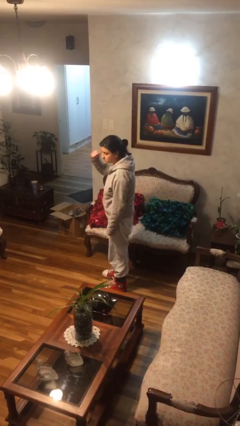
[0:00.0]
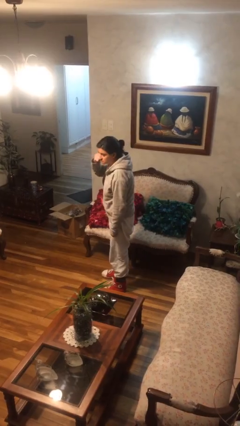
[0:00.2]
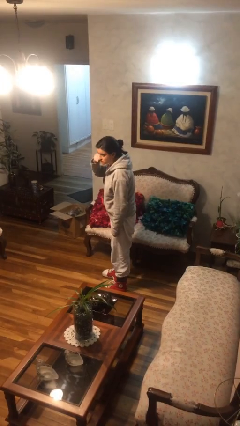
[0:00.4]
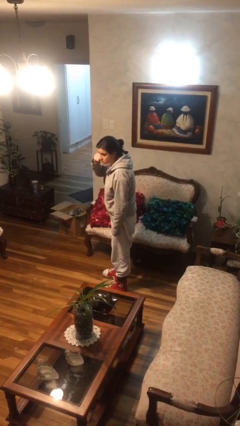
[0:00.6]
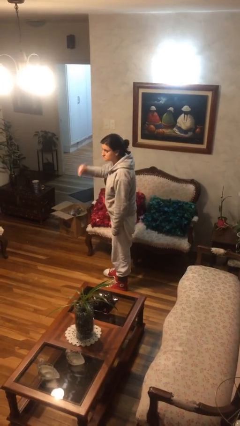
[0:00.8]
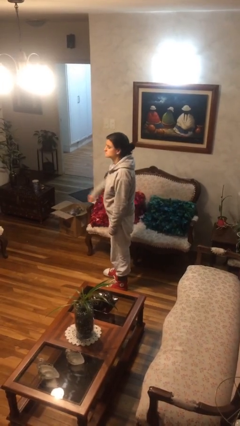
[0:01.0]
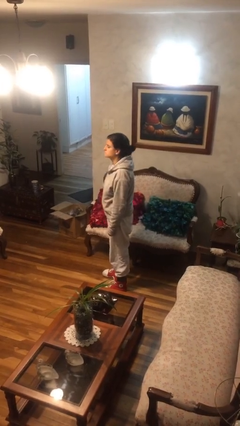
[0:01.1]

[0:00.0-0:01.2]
person gestures call me

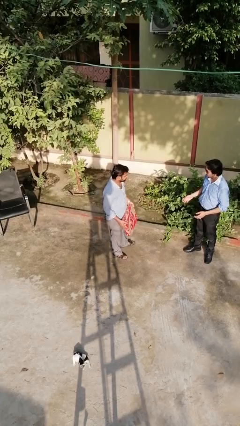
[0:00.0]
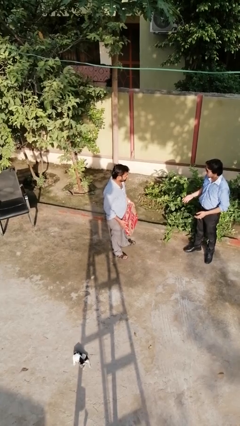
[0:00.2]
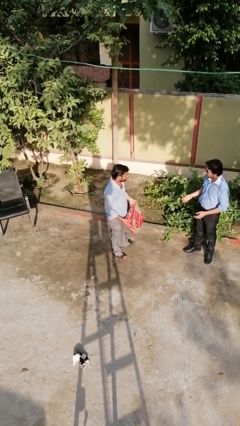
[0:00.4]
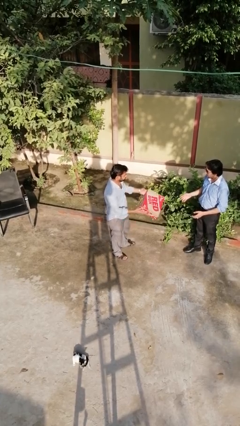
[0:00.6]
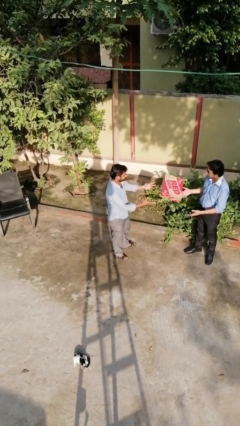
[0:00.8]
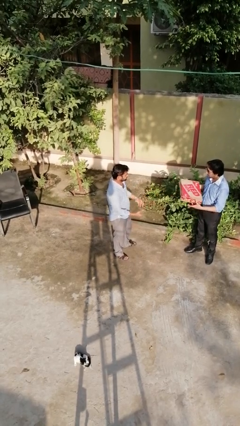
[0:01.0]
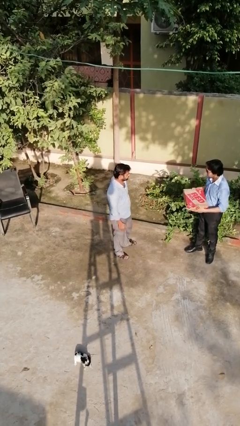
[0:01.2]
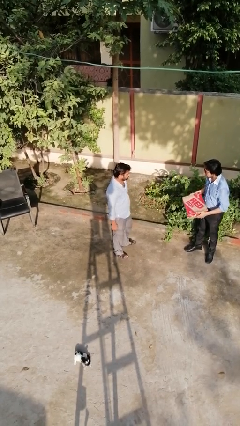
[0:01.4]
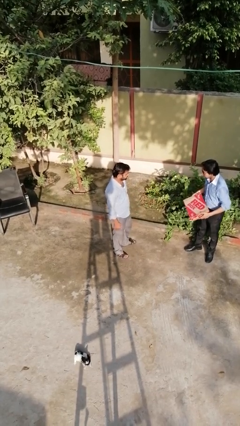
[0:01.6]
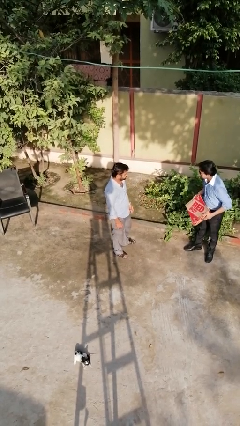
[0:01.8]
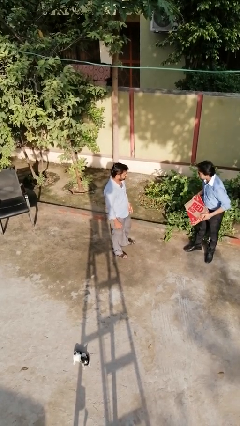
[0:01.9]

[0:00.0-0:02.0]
person throws object to person

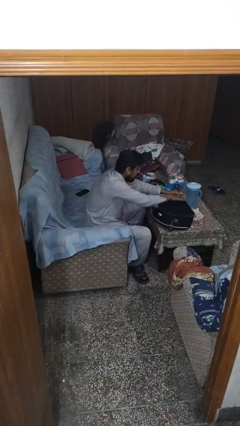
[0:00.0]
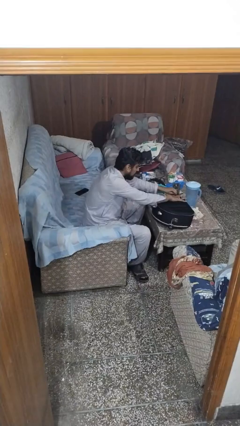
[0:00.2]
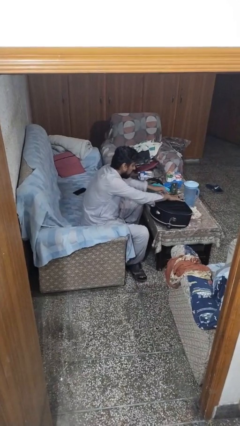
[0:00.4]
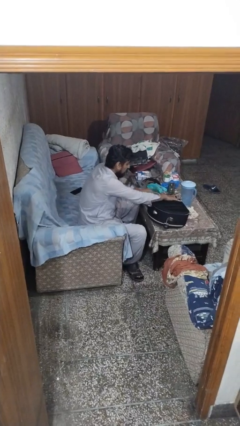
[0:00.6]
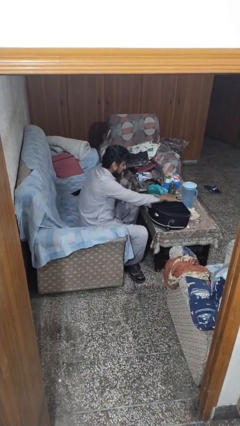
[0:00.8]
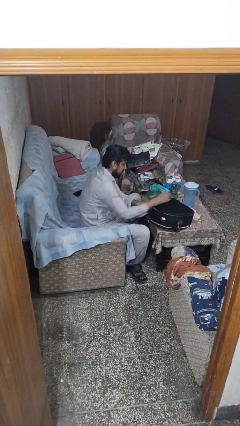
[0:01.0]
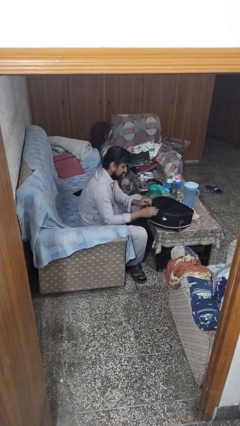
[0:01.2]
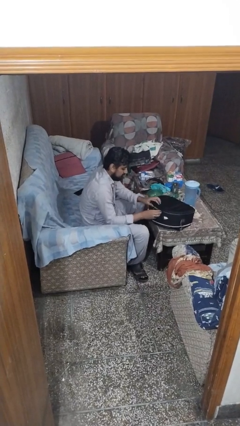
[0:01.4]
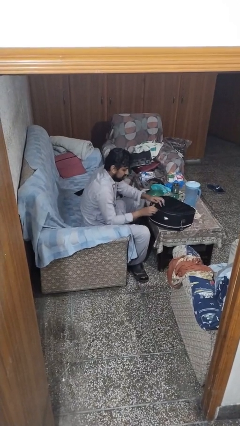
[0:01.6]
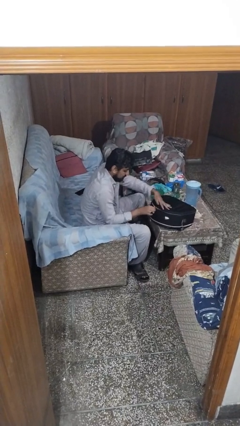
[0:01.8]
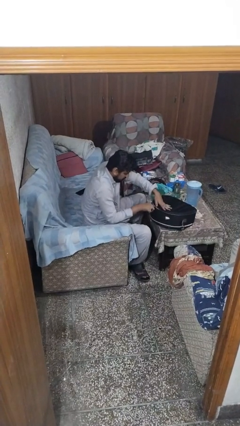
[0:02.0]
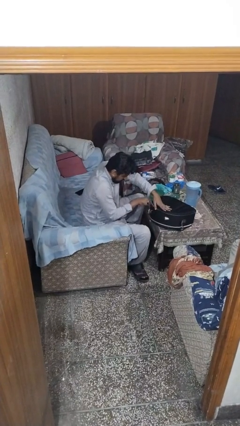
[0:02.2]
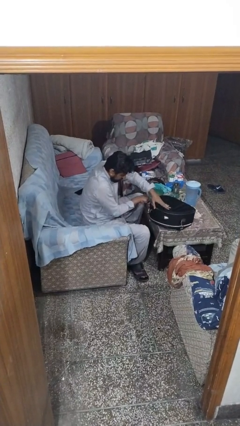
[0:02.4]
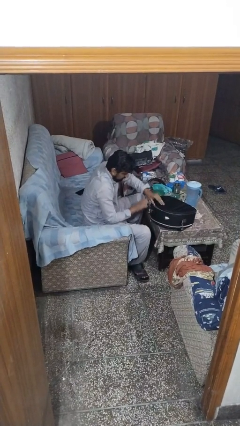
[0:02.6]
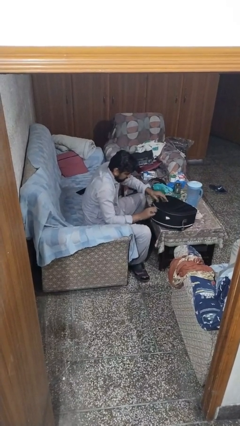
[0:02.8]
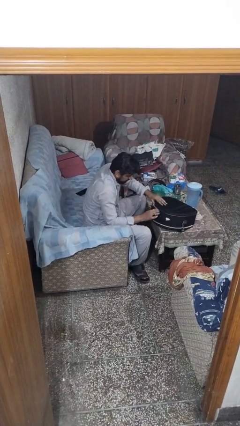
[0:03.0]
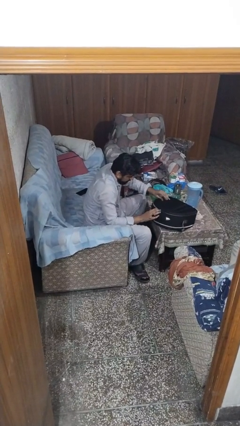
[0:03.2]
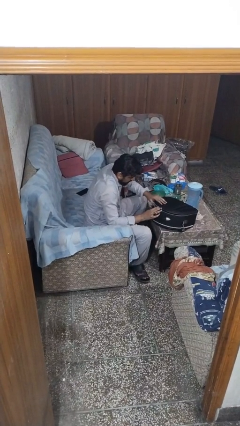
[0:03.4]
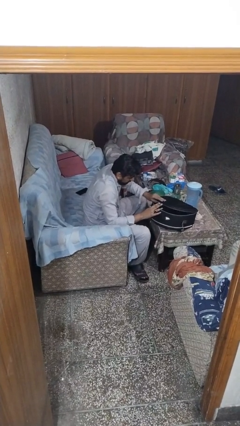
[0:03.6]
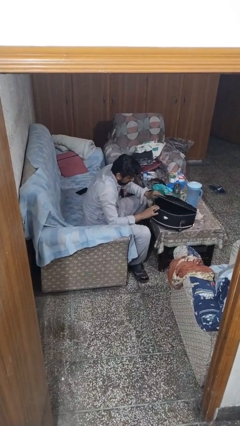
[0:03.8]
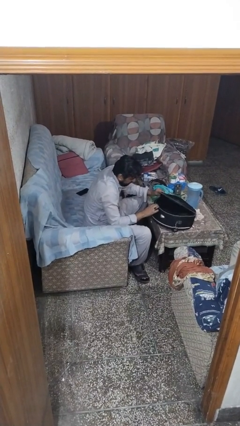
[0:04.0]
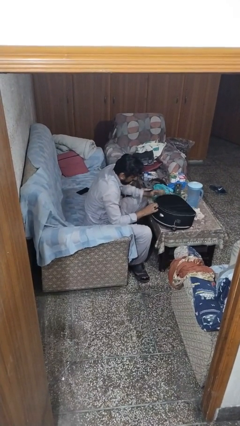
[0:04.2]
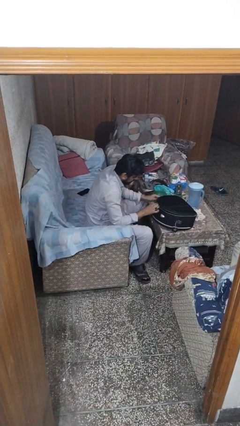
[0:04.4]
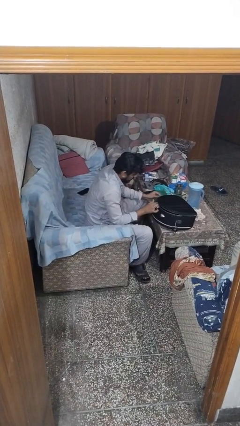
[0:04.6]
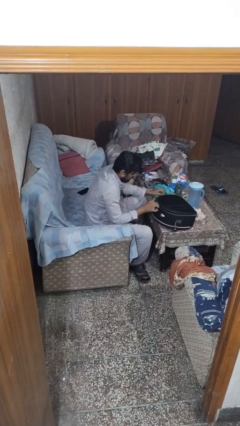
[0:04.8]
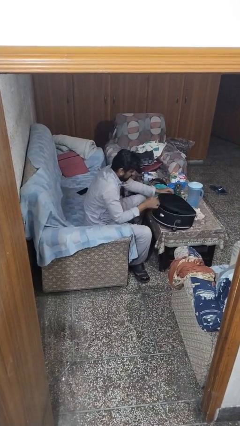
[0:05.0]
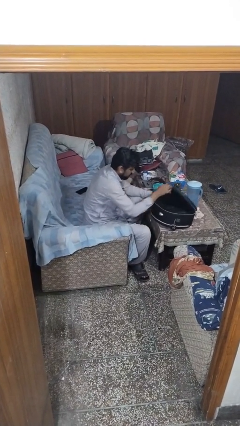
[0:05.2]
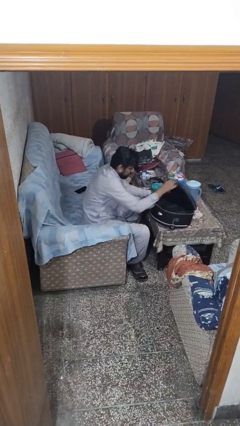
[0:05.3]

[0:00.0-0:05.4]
person opens suitcase

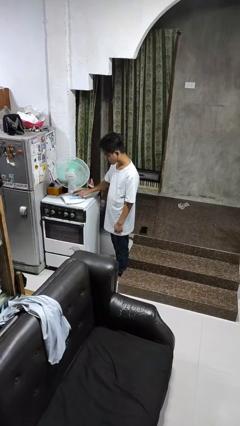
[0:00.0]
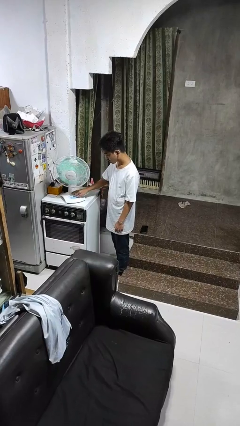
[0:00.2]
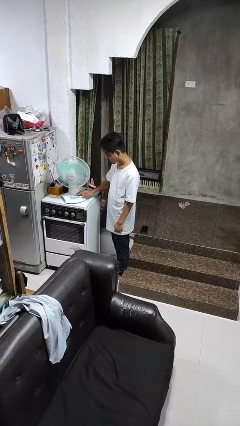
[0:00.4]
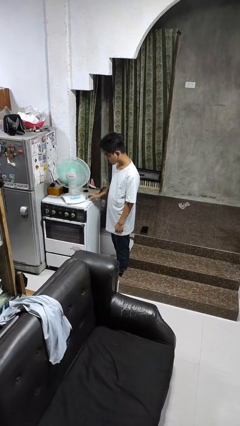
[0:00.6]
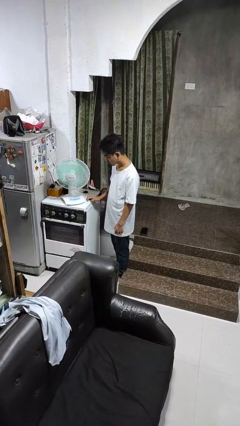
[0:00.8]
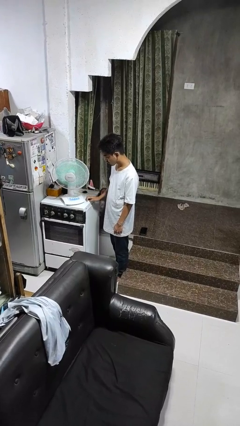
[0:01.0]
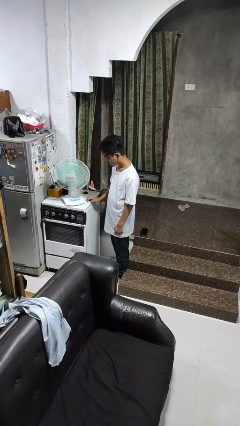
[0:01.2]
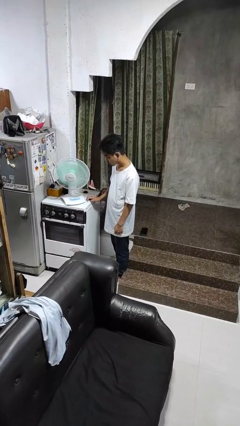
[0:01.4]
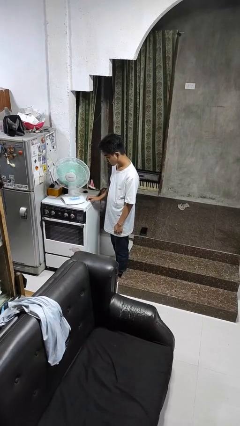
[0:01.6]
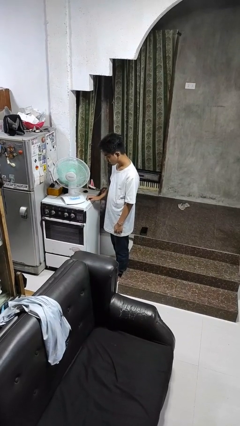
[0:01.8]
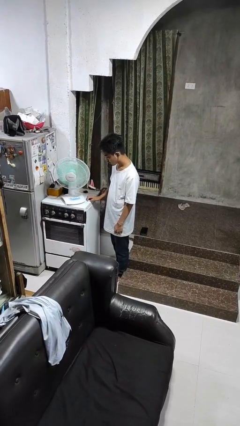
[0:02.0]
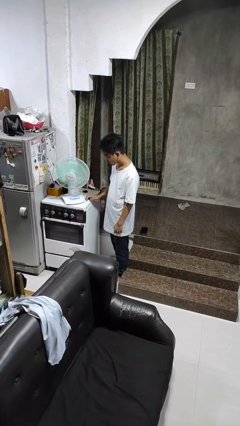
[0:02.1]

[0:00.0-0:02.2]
person turns on fan

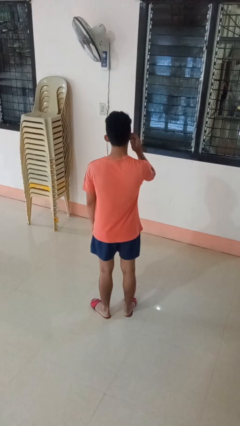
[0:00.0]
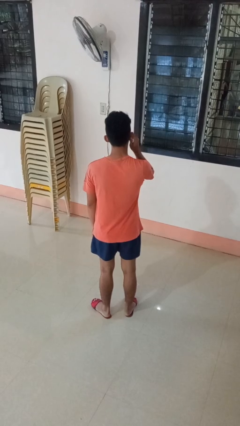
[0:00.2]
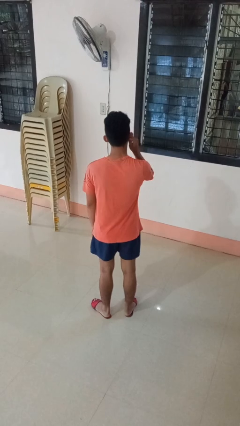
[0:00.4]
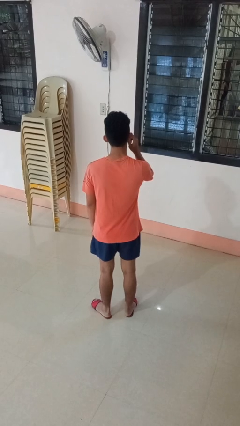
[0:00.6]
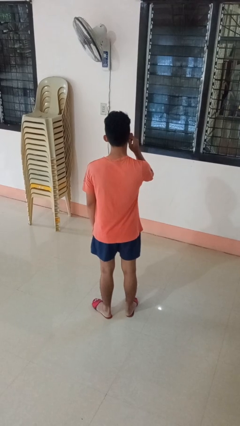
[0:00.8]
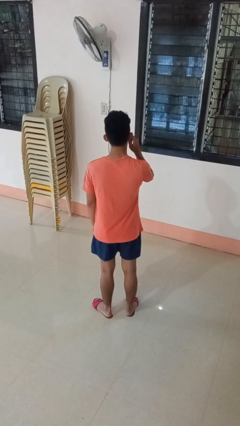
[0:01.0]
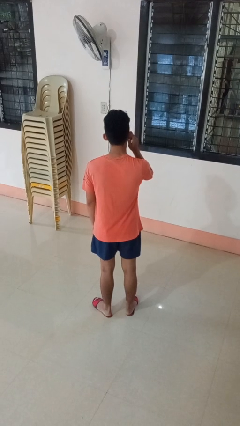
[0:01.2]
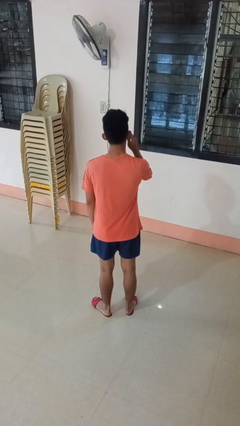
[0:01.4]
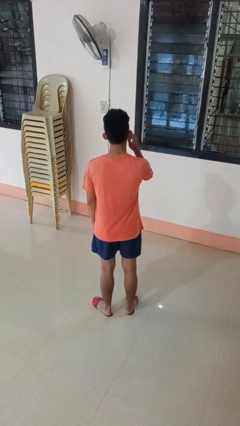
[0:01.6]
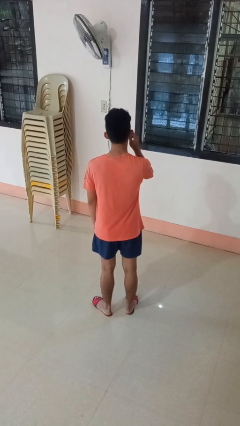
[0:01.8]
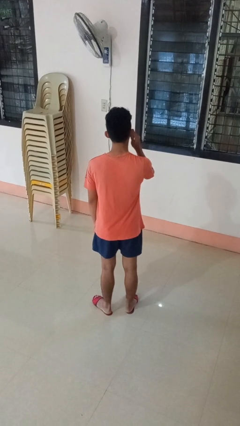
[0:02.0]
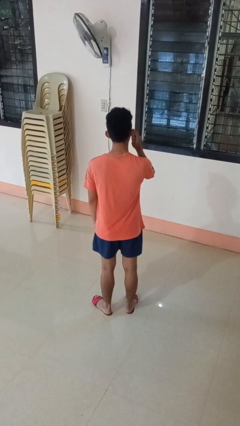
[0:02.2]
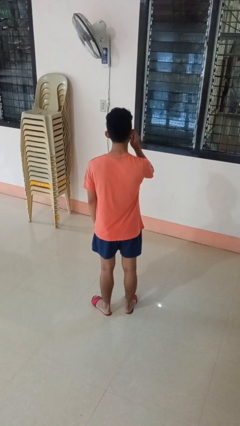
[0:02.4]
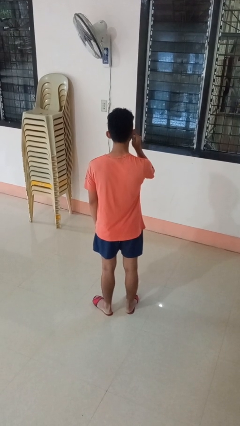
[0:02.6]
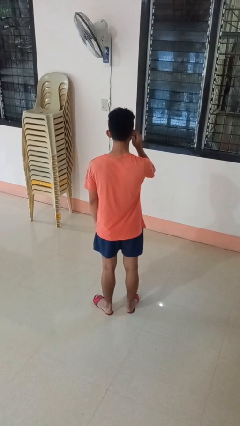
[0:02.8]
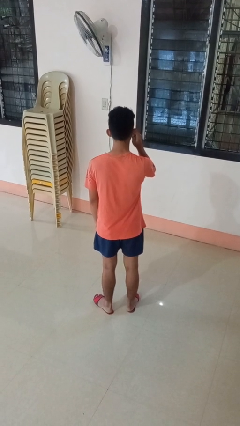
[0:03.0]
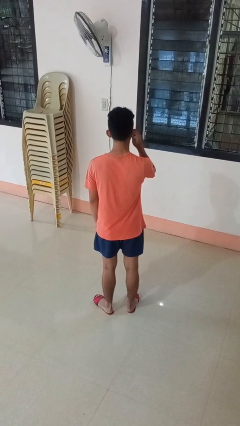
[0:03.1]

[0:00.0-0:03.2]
person touches earlobe

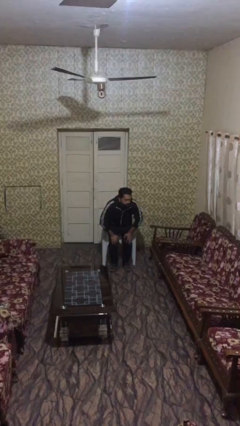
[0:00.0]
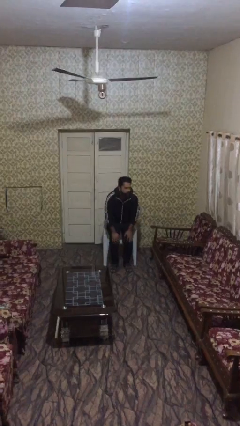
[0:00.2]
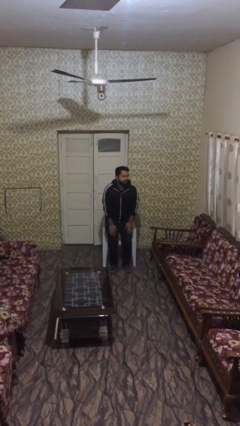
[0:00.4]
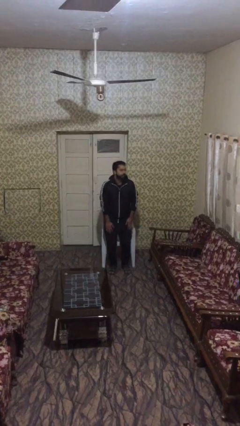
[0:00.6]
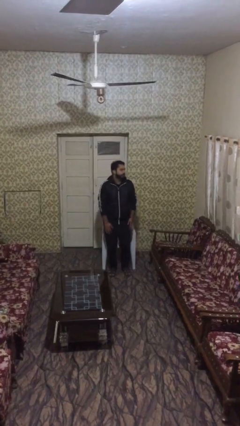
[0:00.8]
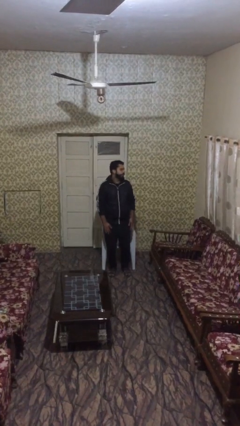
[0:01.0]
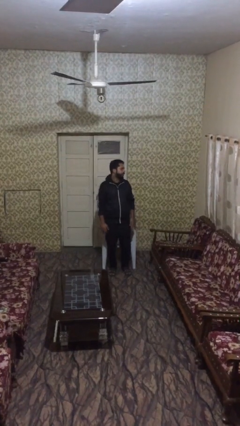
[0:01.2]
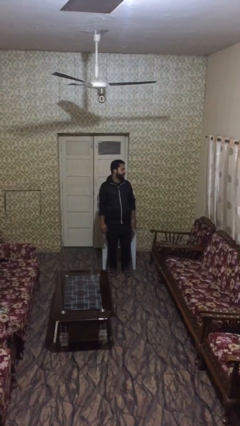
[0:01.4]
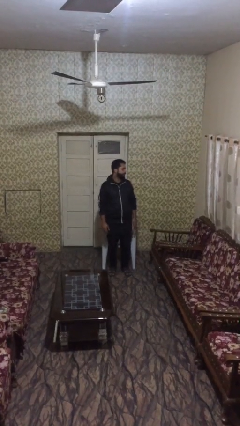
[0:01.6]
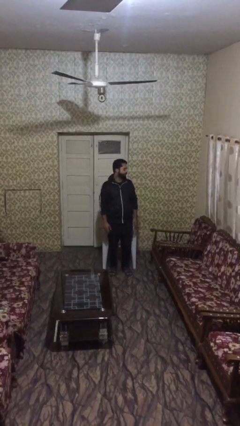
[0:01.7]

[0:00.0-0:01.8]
person stands up

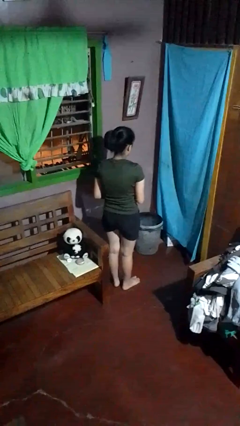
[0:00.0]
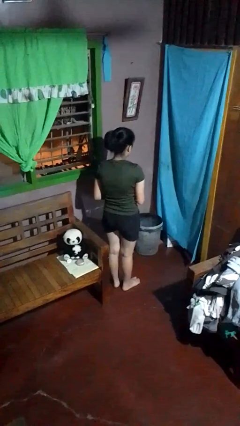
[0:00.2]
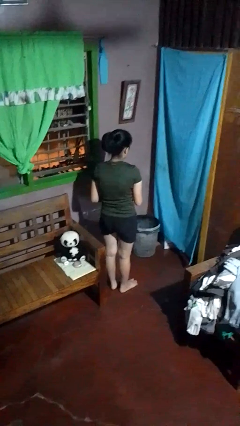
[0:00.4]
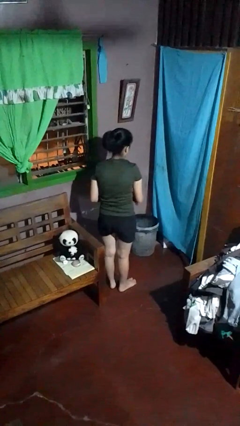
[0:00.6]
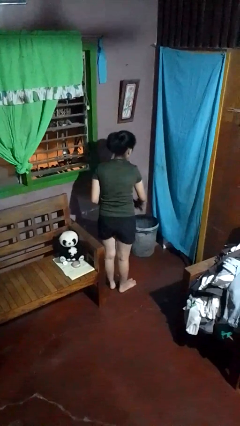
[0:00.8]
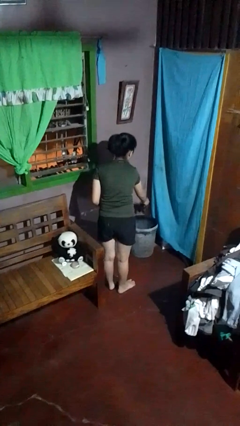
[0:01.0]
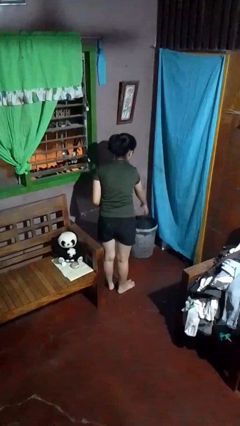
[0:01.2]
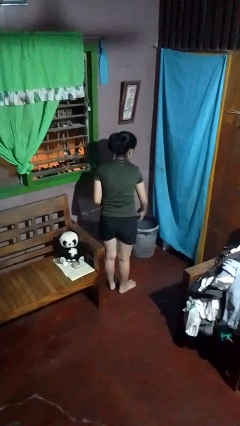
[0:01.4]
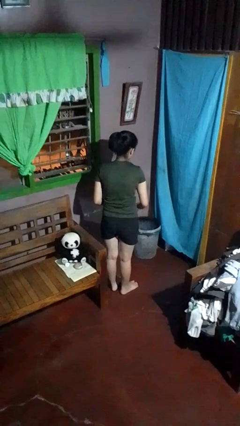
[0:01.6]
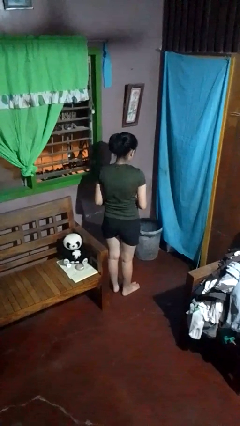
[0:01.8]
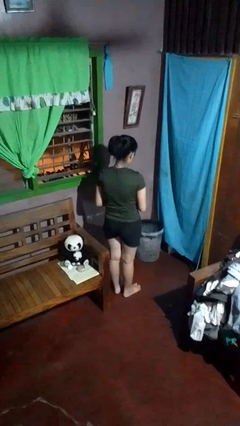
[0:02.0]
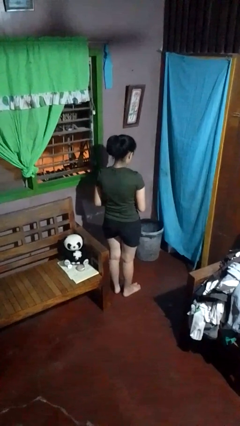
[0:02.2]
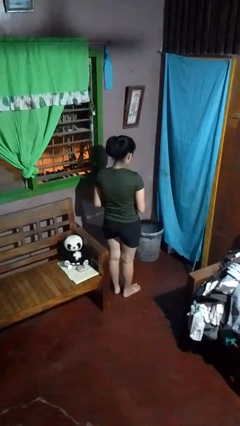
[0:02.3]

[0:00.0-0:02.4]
person discards trash
